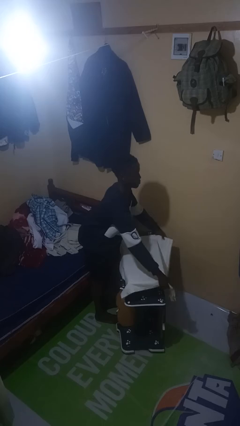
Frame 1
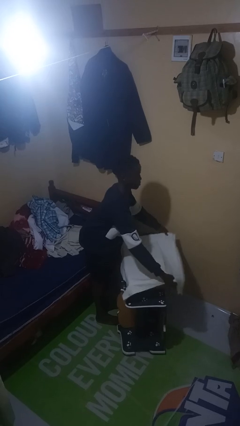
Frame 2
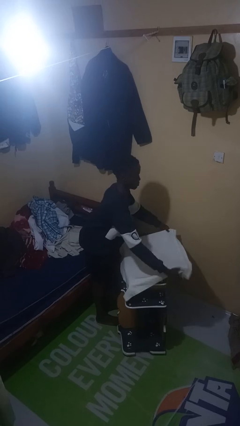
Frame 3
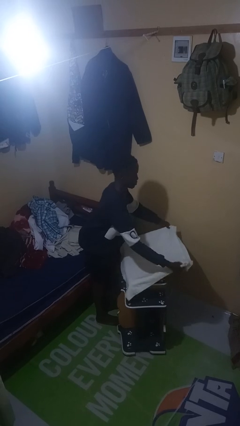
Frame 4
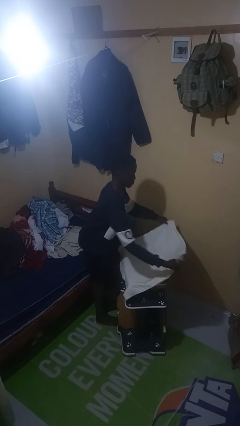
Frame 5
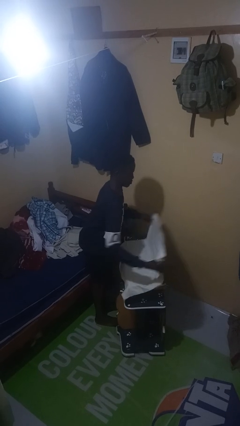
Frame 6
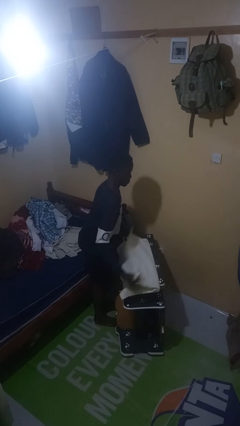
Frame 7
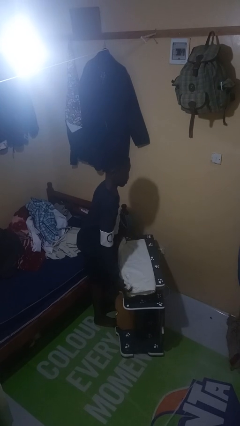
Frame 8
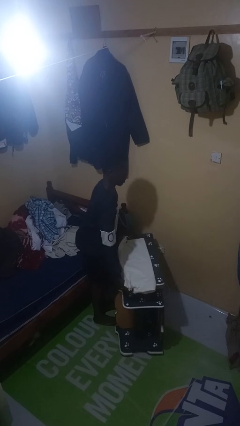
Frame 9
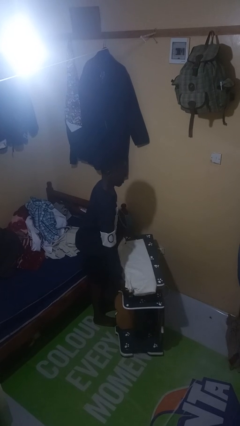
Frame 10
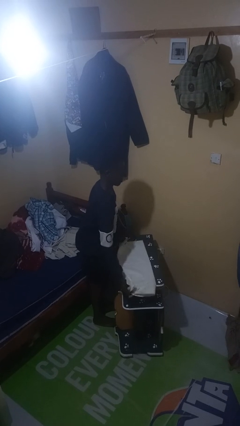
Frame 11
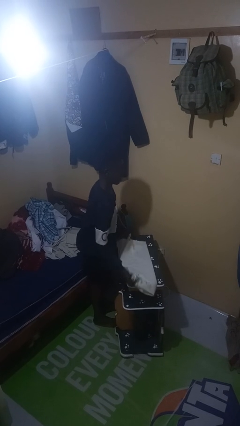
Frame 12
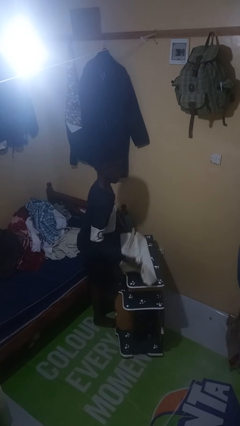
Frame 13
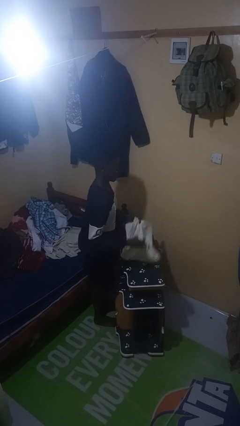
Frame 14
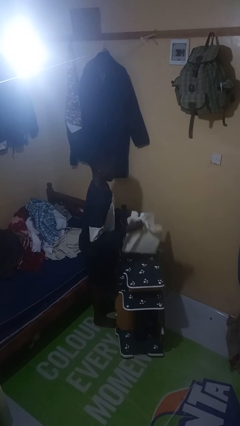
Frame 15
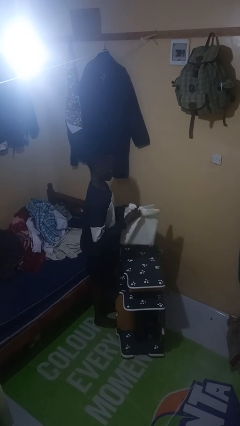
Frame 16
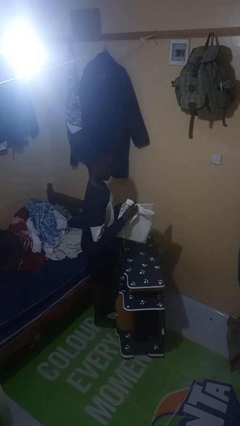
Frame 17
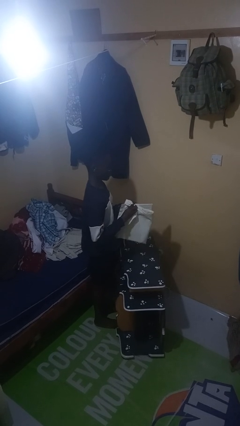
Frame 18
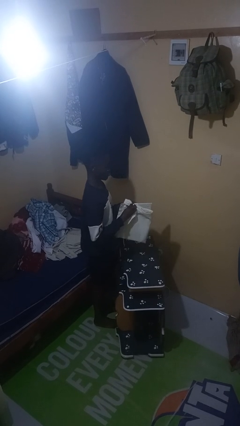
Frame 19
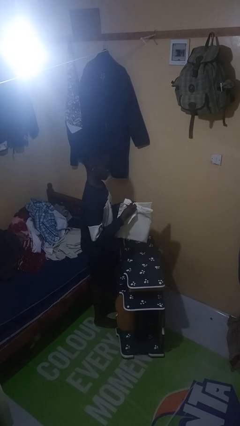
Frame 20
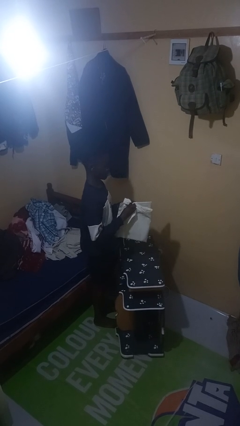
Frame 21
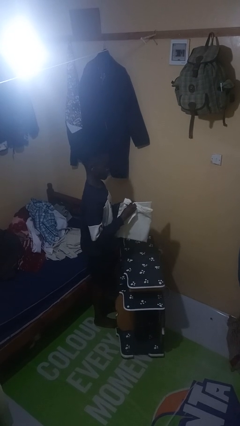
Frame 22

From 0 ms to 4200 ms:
person folds tablecloth

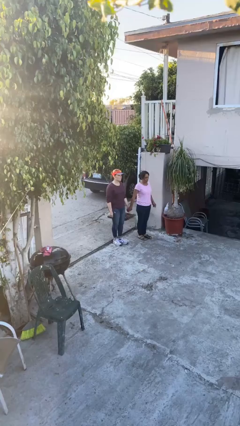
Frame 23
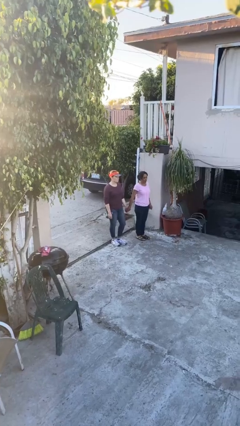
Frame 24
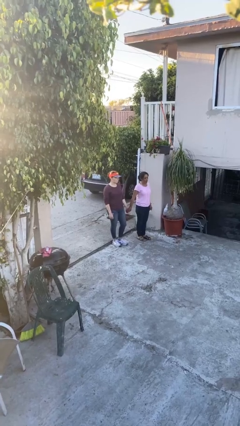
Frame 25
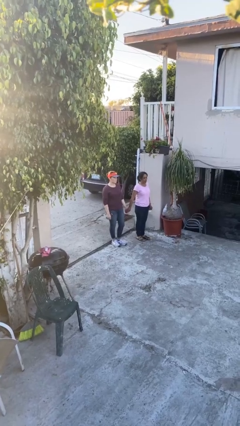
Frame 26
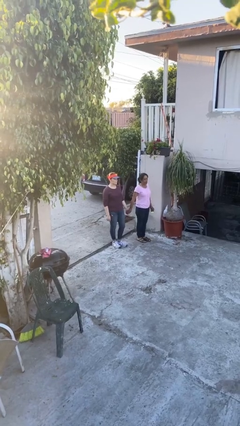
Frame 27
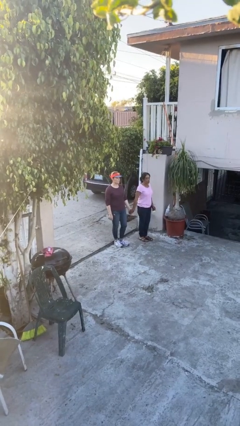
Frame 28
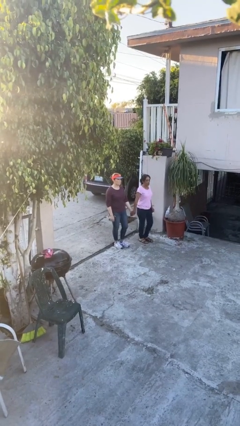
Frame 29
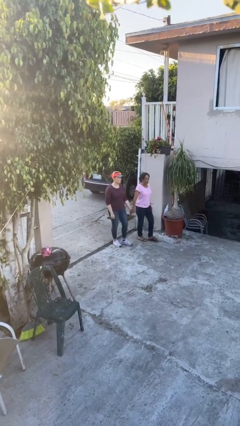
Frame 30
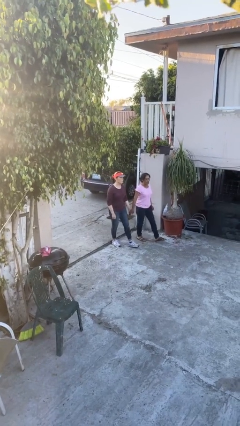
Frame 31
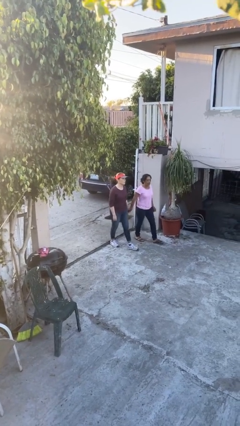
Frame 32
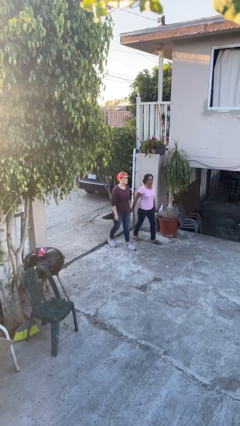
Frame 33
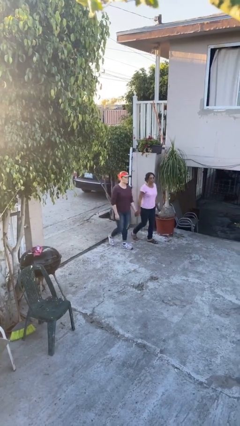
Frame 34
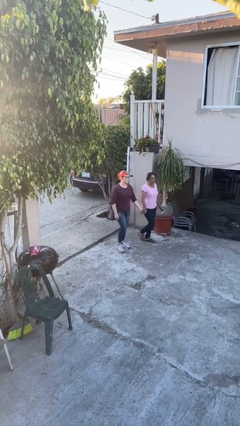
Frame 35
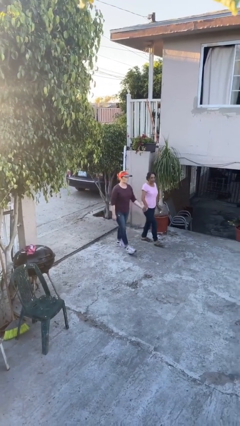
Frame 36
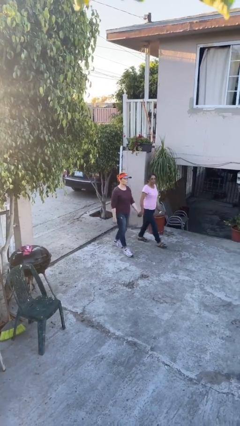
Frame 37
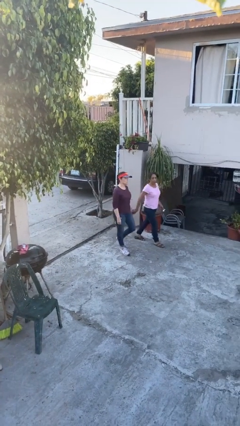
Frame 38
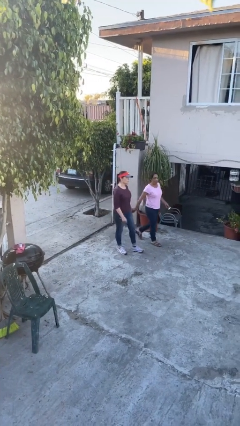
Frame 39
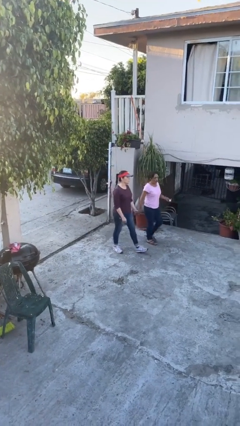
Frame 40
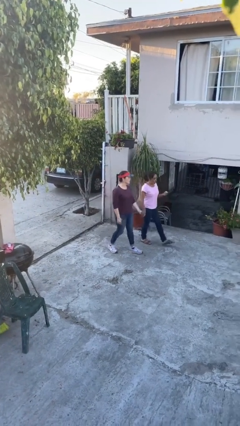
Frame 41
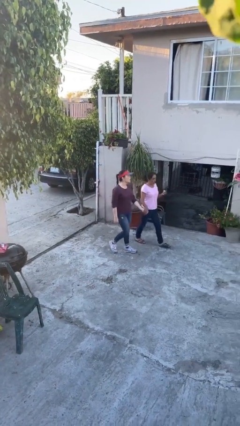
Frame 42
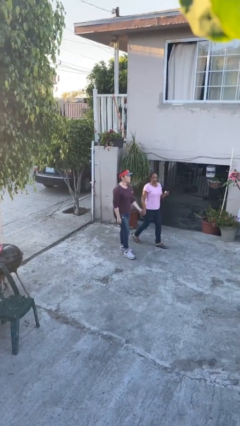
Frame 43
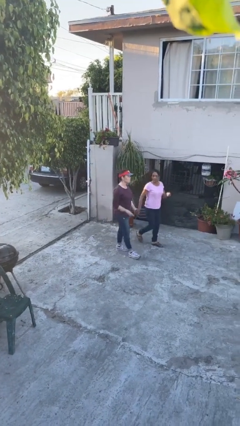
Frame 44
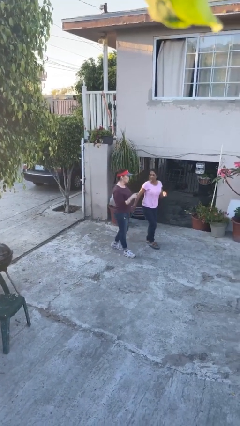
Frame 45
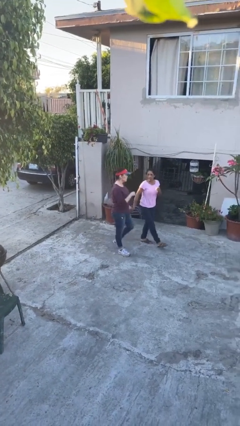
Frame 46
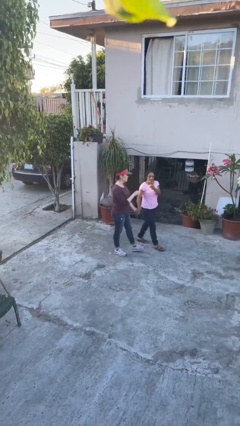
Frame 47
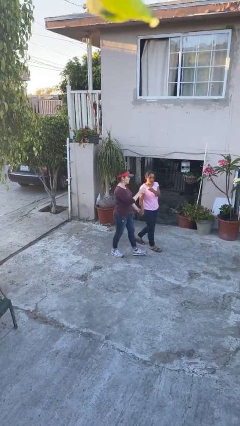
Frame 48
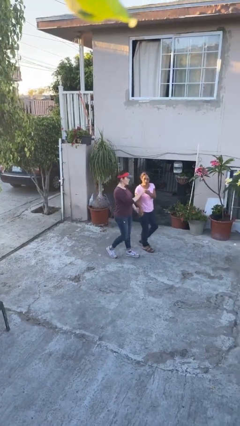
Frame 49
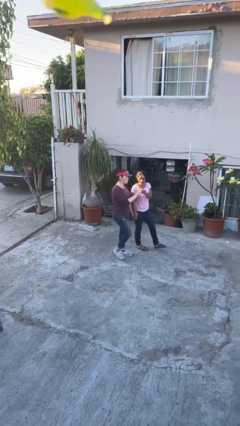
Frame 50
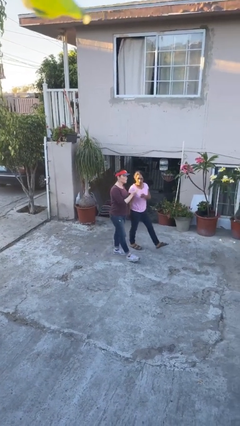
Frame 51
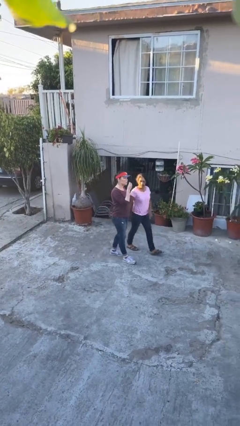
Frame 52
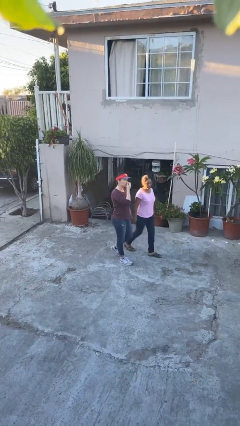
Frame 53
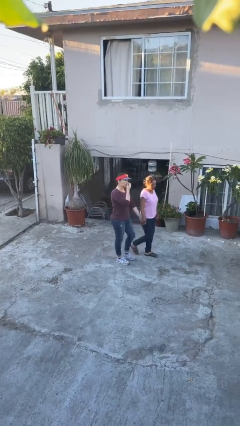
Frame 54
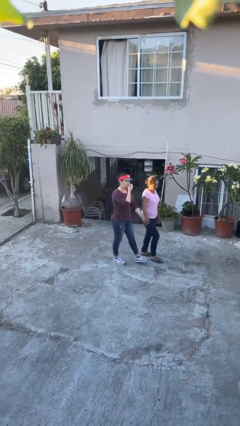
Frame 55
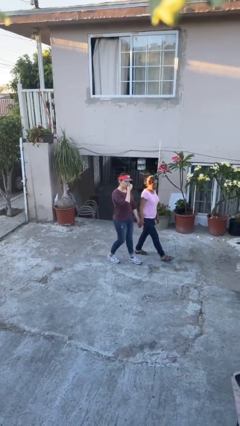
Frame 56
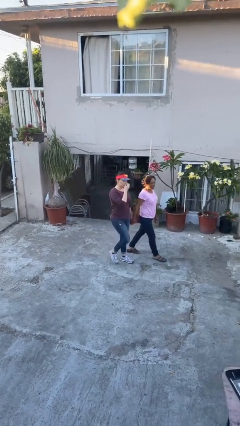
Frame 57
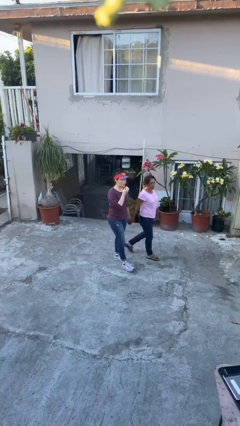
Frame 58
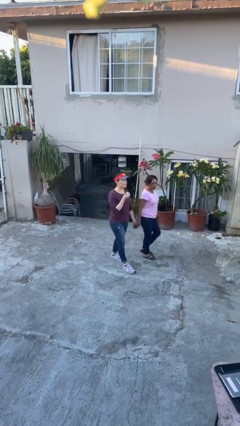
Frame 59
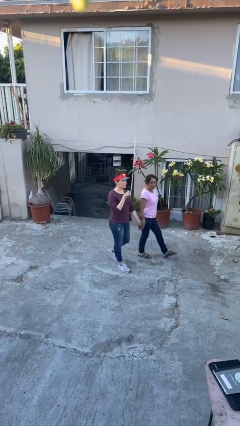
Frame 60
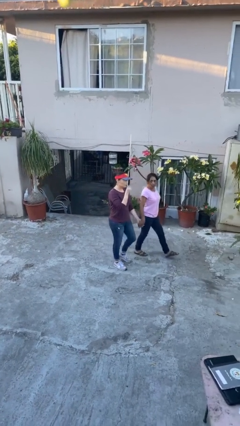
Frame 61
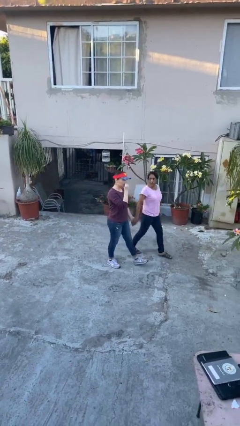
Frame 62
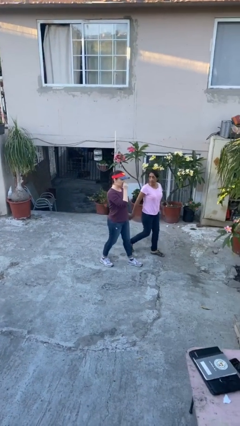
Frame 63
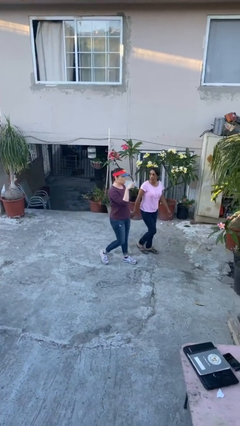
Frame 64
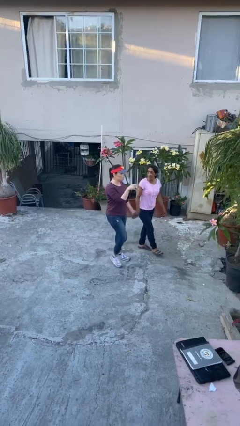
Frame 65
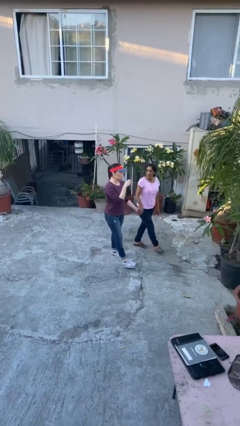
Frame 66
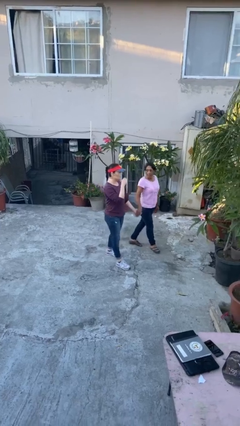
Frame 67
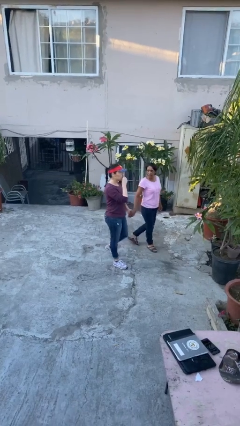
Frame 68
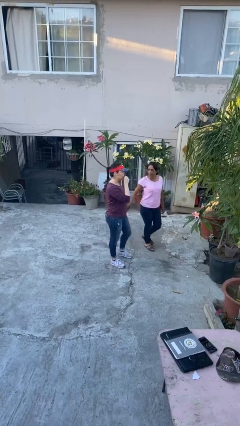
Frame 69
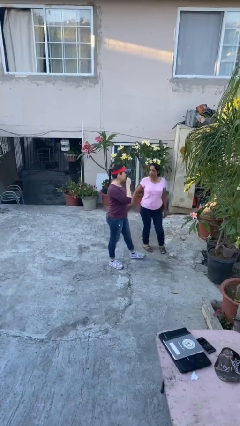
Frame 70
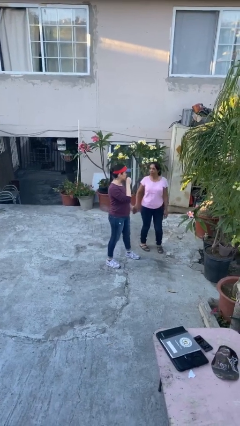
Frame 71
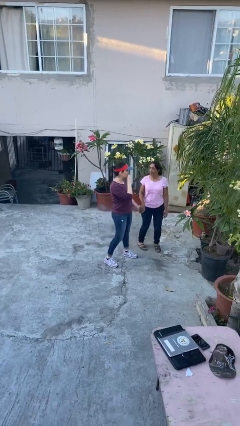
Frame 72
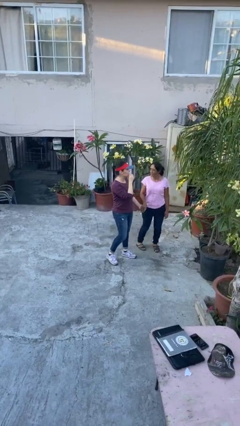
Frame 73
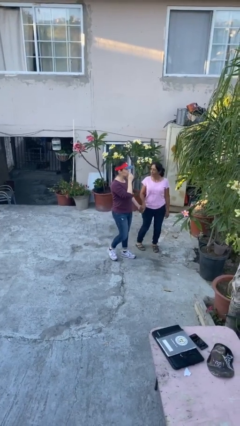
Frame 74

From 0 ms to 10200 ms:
person holds hand

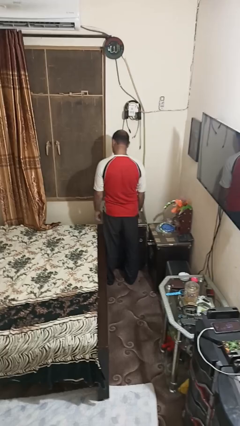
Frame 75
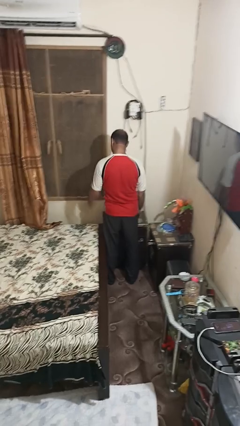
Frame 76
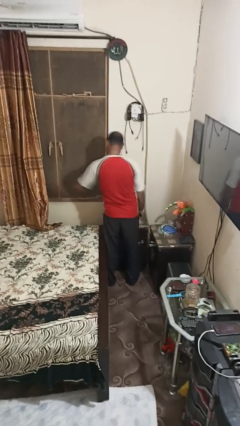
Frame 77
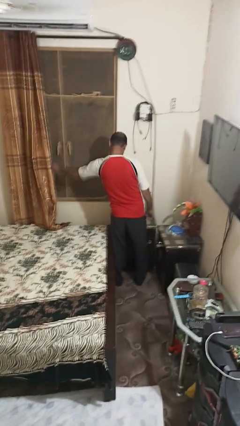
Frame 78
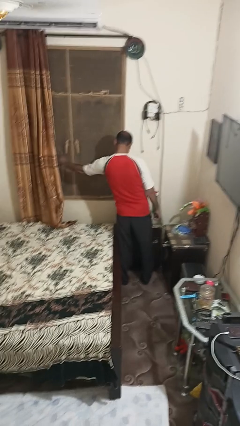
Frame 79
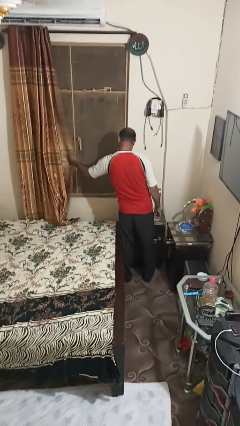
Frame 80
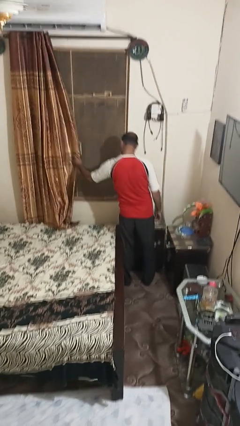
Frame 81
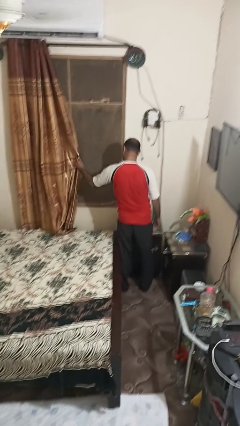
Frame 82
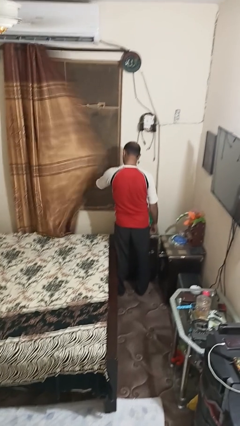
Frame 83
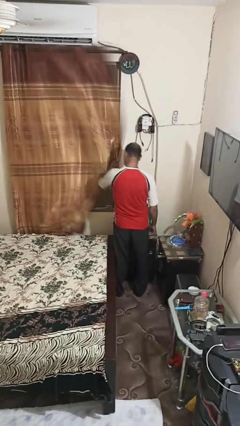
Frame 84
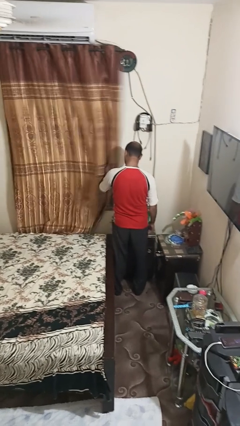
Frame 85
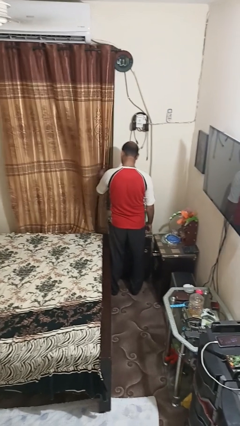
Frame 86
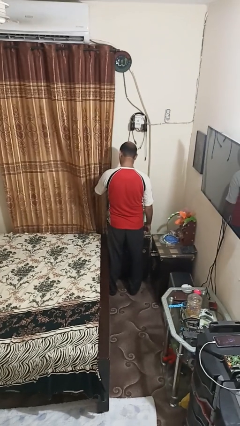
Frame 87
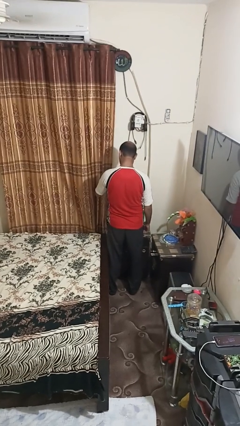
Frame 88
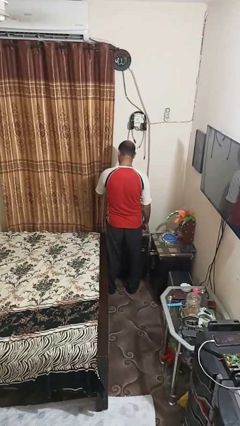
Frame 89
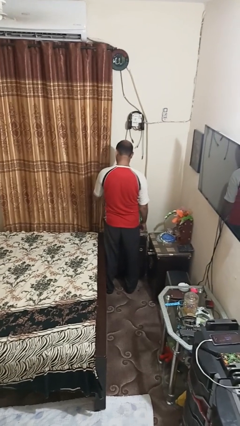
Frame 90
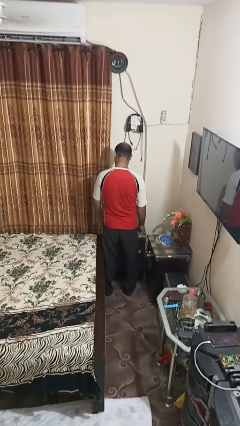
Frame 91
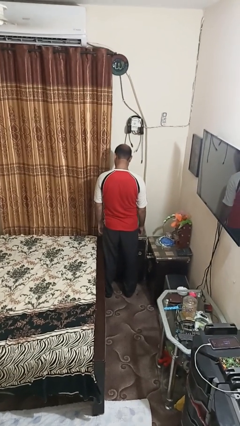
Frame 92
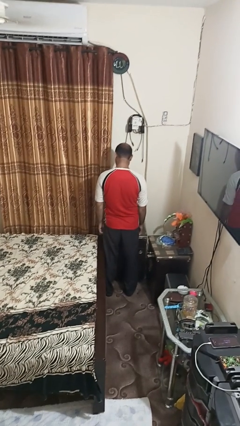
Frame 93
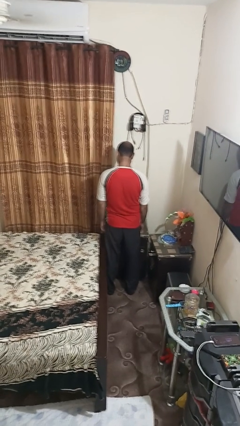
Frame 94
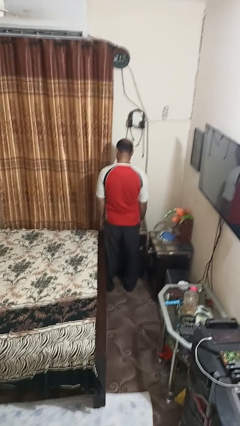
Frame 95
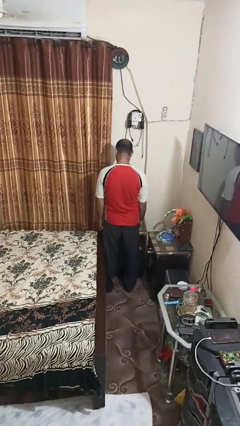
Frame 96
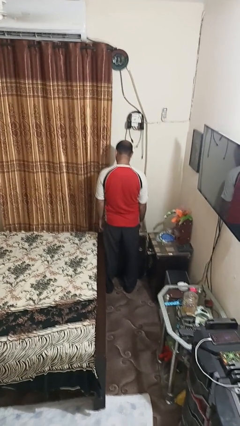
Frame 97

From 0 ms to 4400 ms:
person closes curtains
